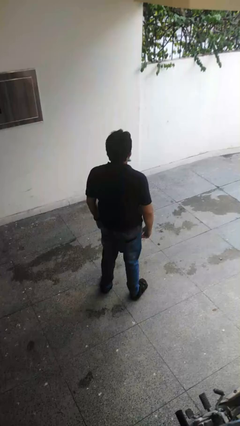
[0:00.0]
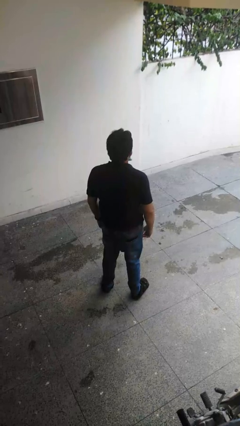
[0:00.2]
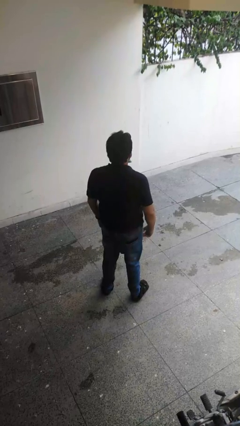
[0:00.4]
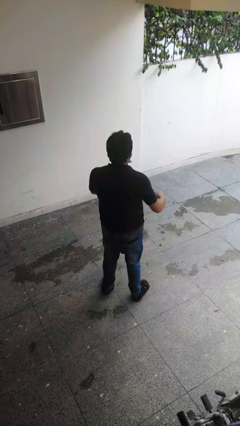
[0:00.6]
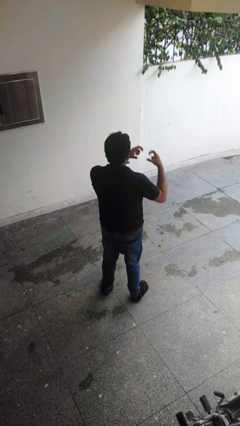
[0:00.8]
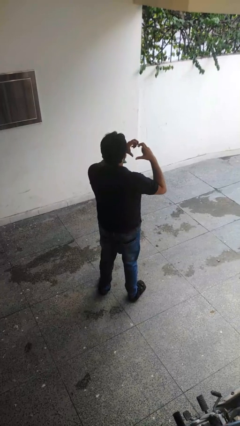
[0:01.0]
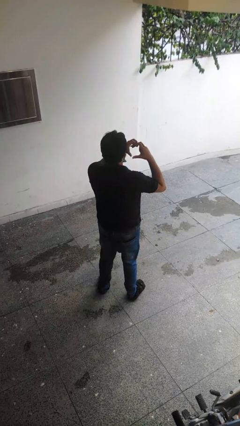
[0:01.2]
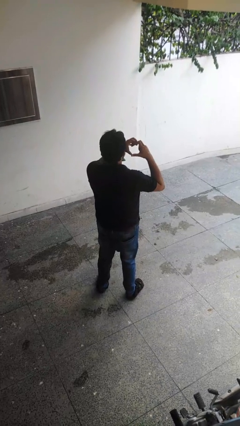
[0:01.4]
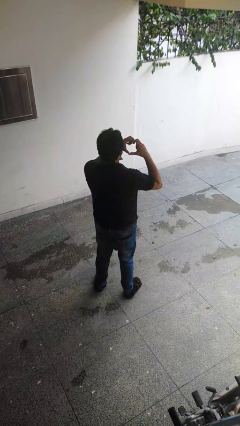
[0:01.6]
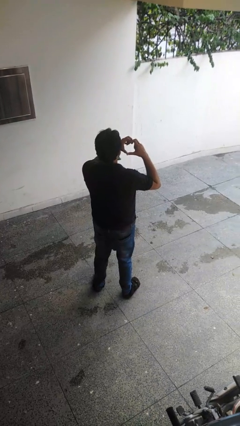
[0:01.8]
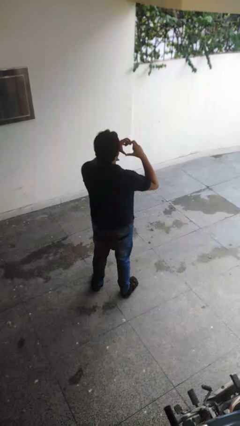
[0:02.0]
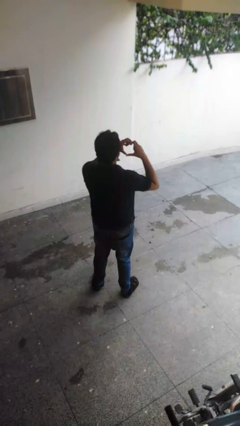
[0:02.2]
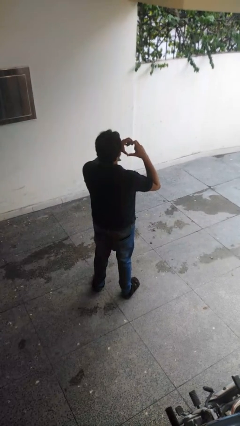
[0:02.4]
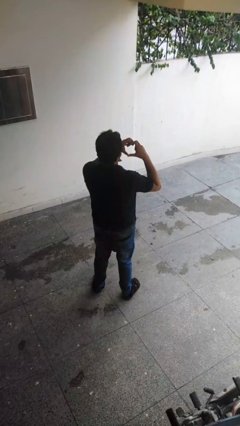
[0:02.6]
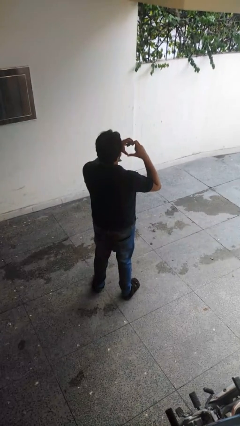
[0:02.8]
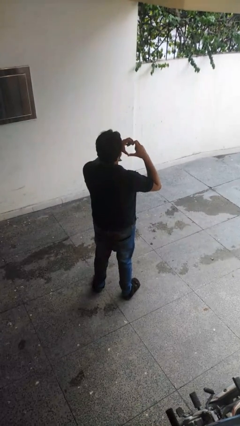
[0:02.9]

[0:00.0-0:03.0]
person gestures heart

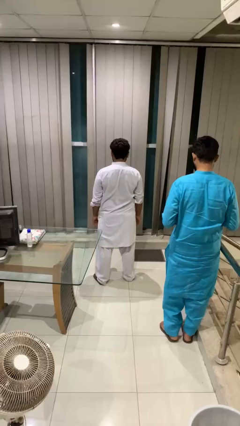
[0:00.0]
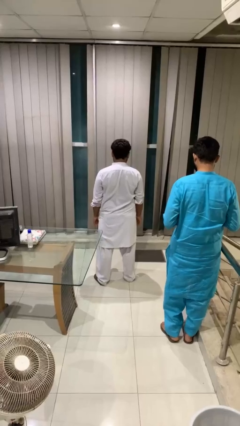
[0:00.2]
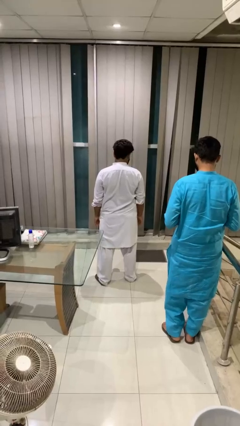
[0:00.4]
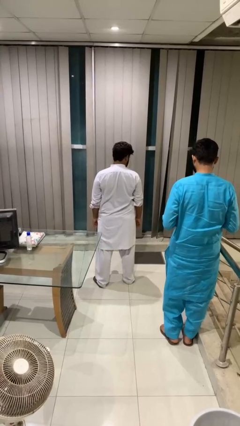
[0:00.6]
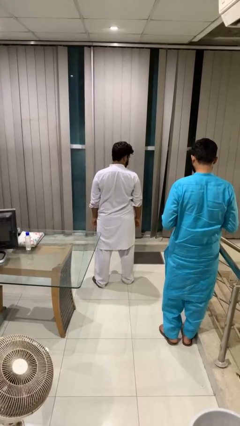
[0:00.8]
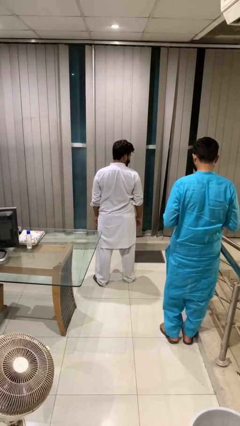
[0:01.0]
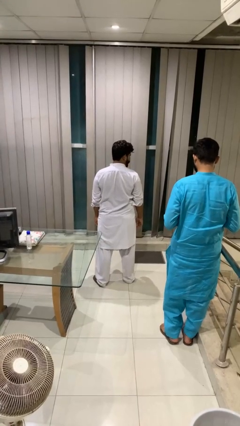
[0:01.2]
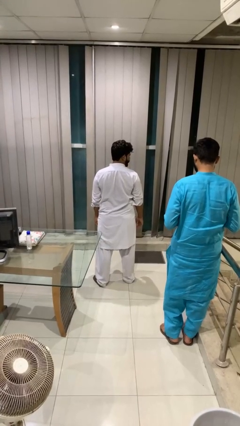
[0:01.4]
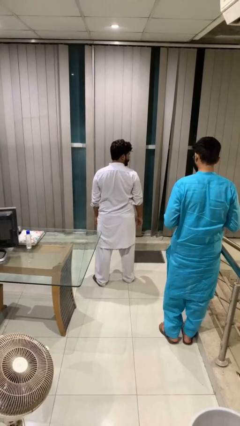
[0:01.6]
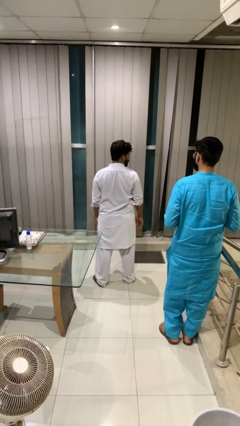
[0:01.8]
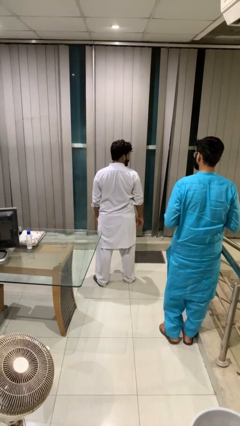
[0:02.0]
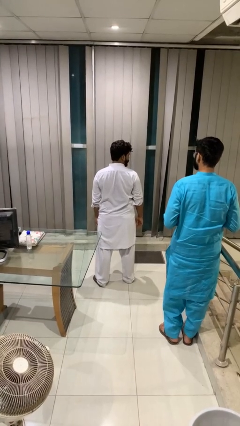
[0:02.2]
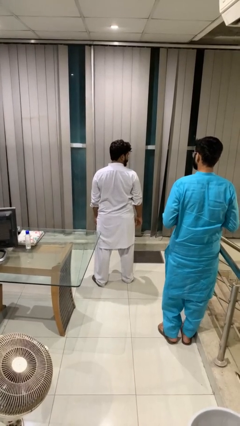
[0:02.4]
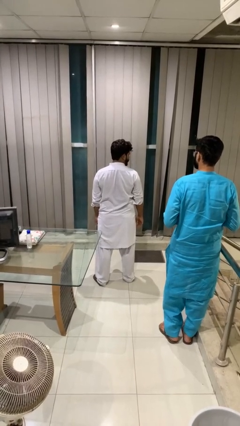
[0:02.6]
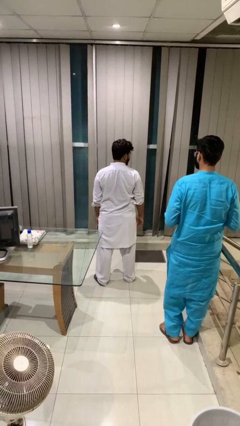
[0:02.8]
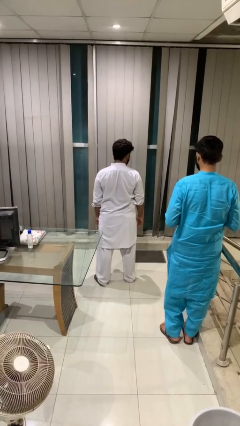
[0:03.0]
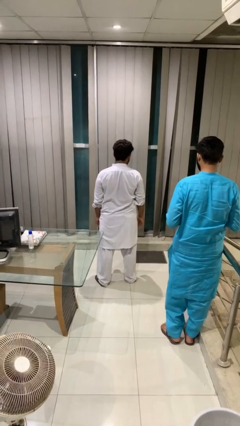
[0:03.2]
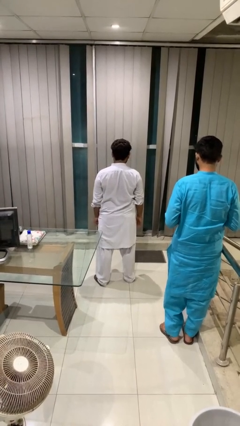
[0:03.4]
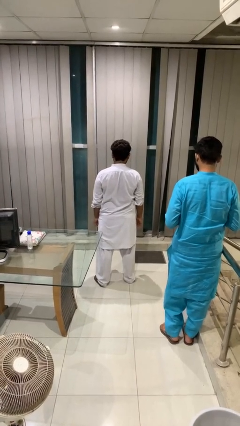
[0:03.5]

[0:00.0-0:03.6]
person looks over shoulder

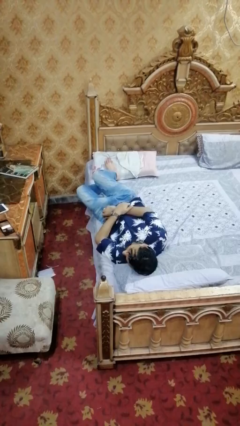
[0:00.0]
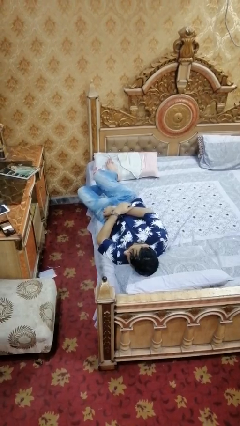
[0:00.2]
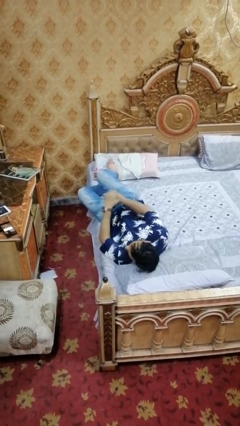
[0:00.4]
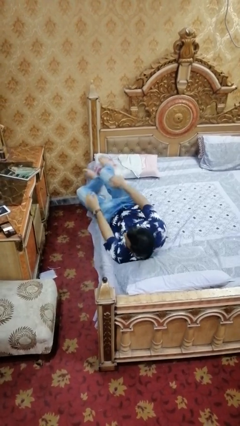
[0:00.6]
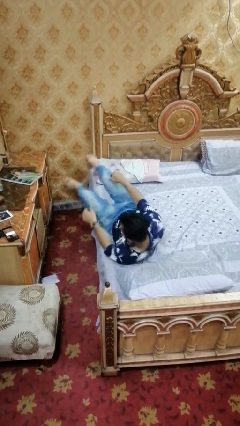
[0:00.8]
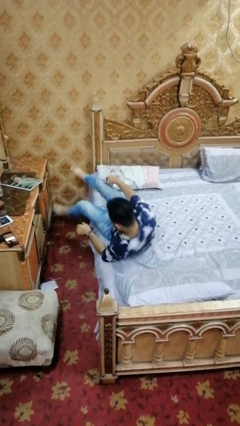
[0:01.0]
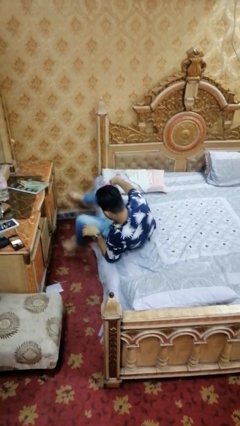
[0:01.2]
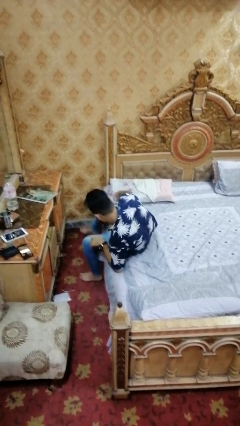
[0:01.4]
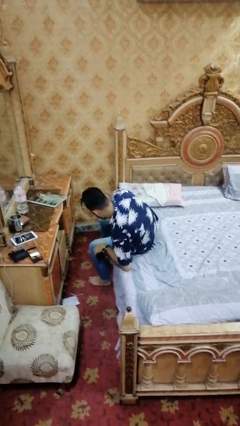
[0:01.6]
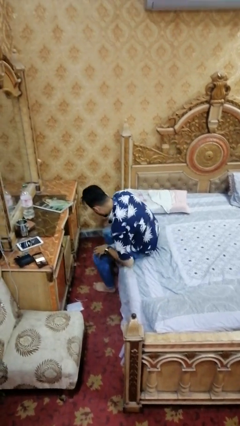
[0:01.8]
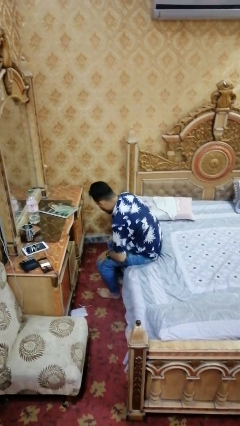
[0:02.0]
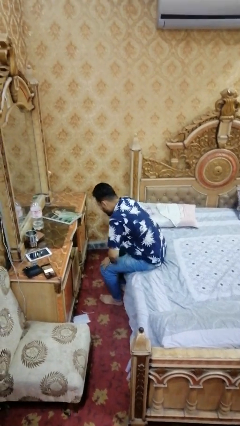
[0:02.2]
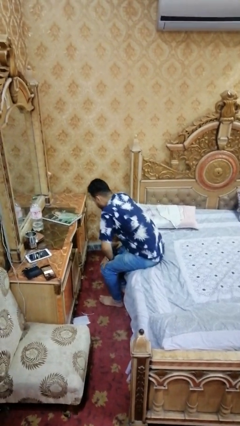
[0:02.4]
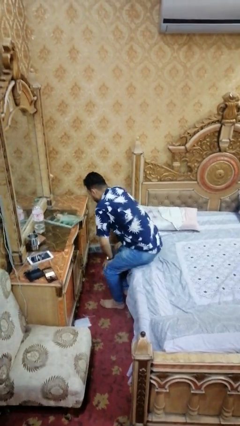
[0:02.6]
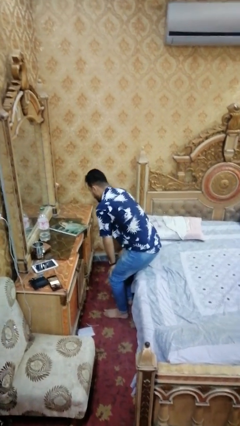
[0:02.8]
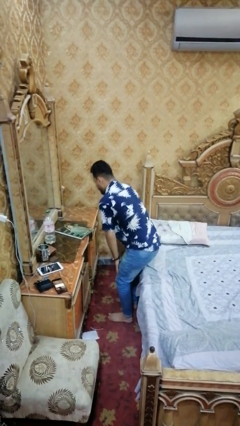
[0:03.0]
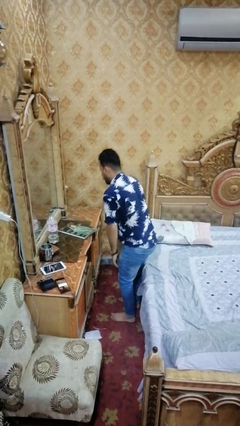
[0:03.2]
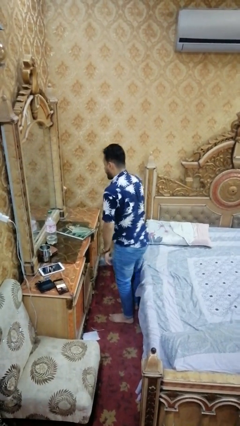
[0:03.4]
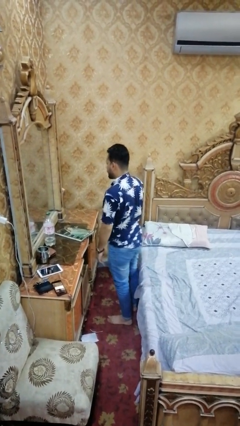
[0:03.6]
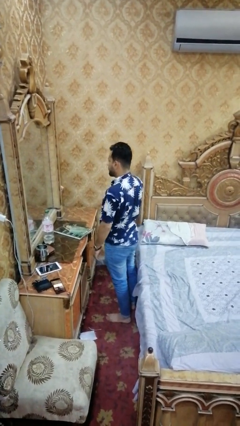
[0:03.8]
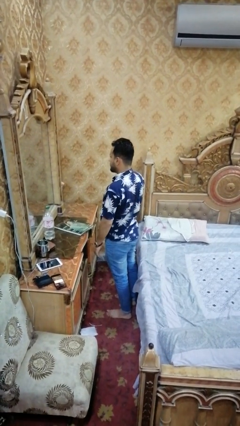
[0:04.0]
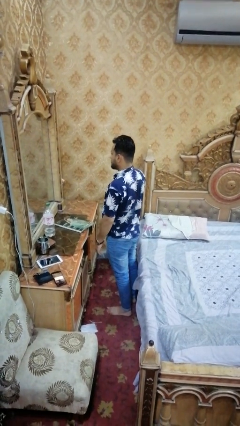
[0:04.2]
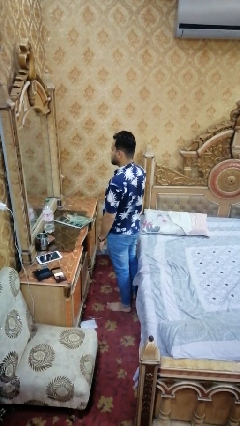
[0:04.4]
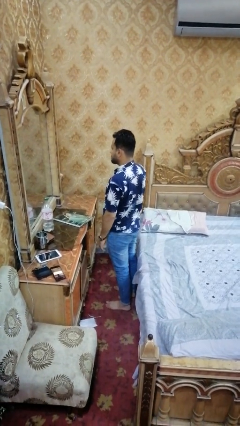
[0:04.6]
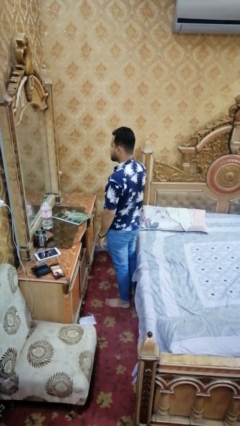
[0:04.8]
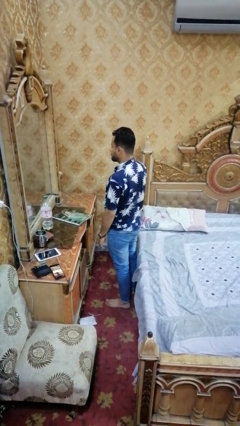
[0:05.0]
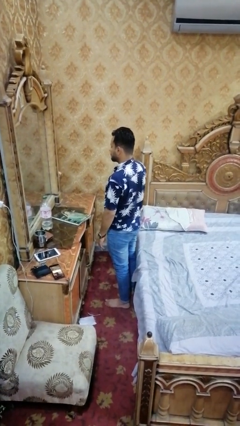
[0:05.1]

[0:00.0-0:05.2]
person stands up

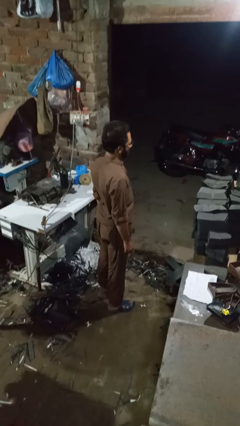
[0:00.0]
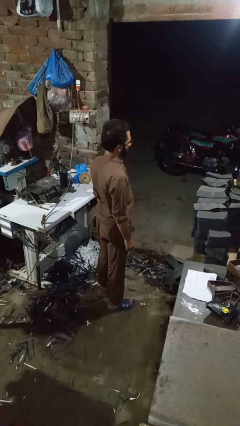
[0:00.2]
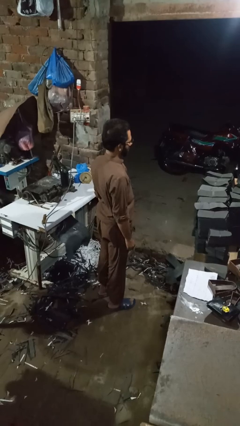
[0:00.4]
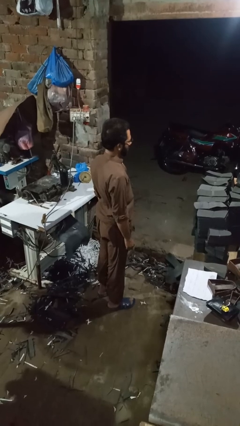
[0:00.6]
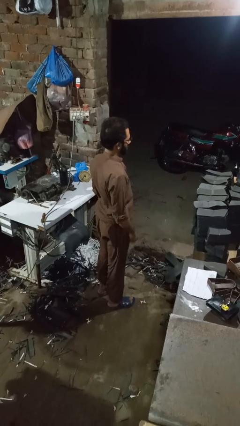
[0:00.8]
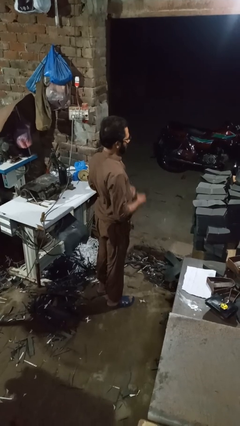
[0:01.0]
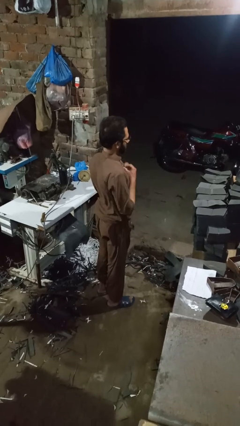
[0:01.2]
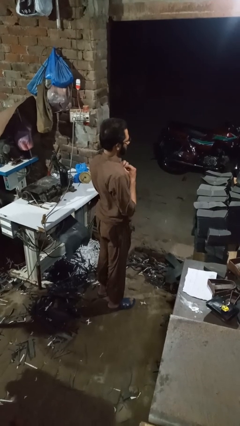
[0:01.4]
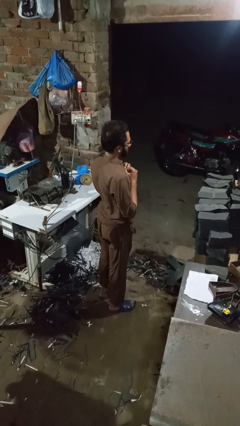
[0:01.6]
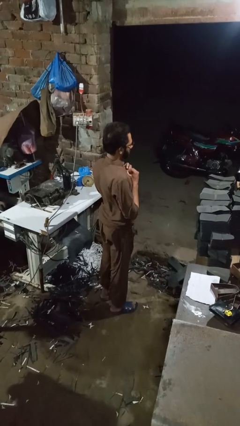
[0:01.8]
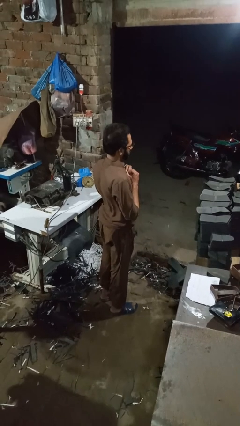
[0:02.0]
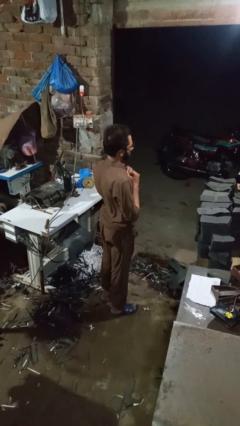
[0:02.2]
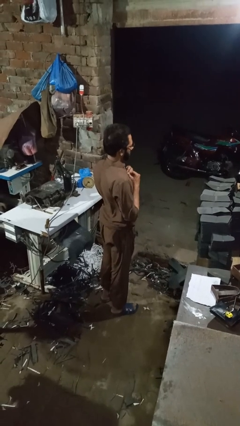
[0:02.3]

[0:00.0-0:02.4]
person unbuttons shirt

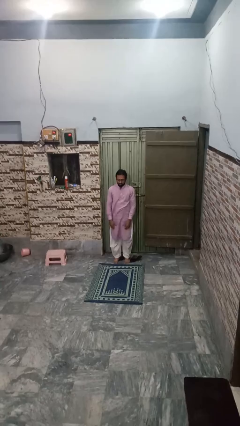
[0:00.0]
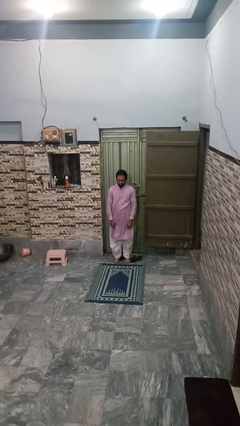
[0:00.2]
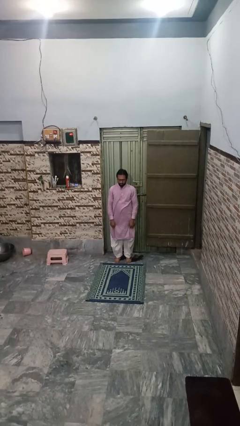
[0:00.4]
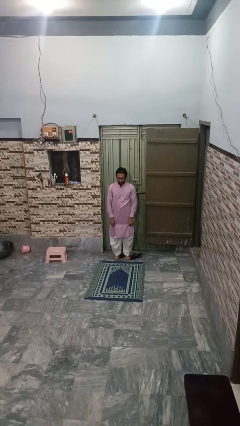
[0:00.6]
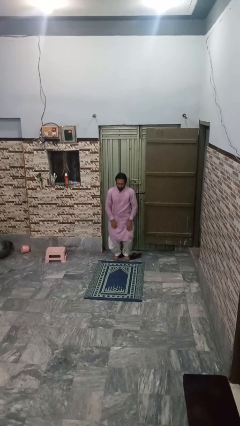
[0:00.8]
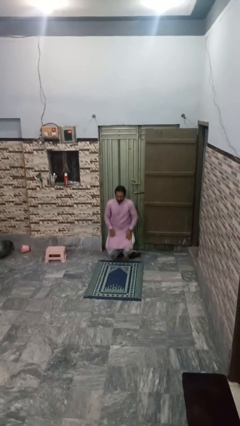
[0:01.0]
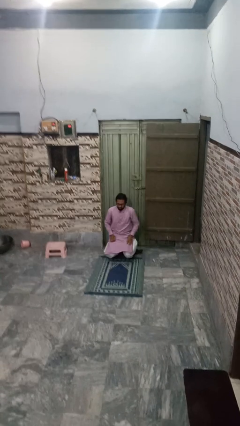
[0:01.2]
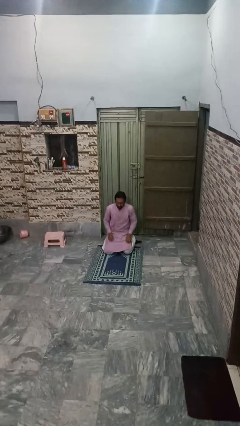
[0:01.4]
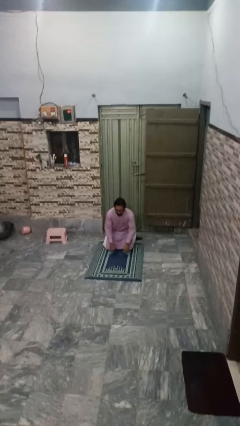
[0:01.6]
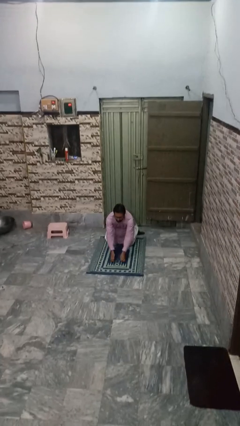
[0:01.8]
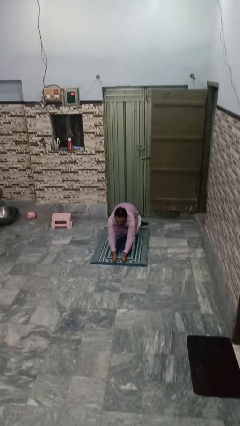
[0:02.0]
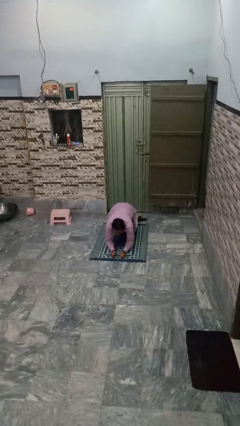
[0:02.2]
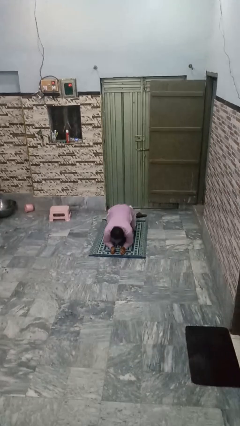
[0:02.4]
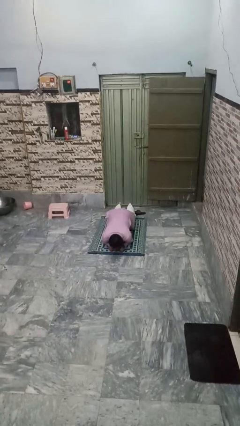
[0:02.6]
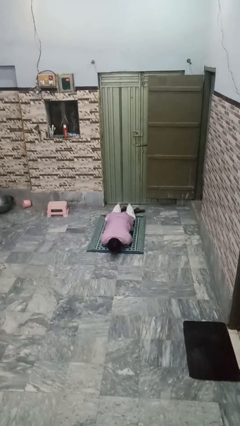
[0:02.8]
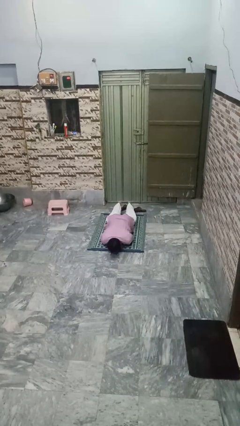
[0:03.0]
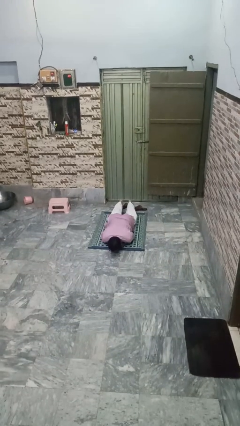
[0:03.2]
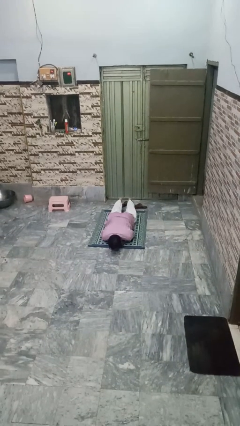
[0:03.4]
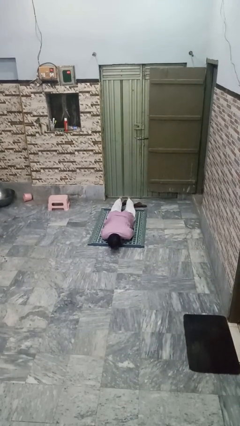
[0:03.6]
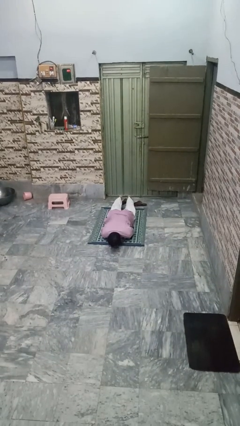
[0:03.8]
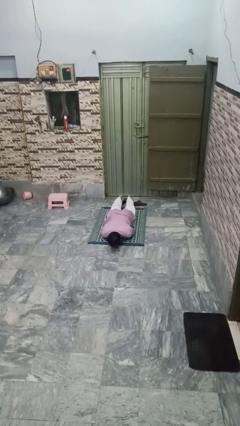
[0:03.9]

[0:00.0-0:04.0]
person exercises with plank
